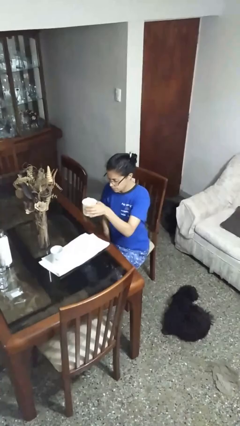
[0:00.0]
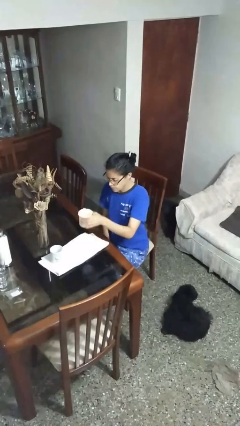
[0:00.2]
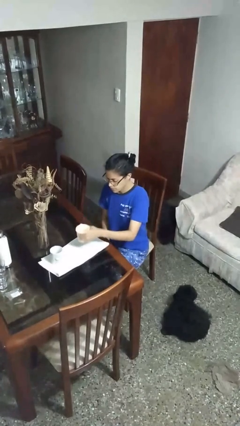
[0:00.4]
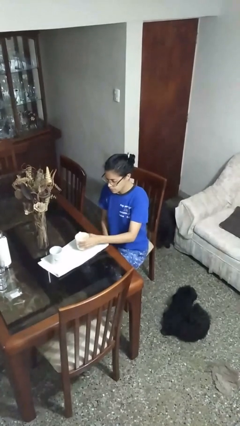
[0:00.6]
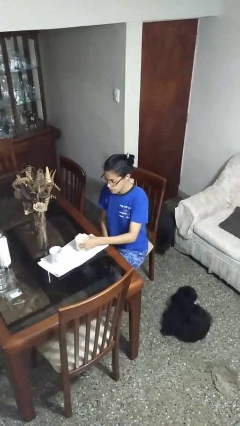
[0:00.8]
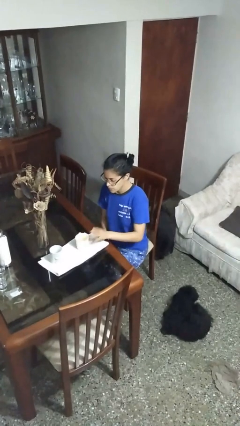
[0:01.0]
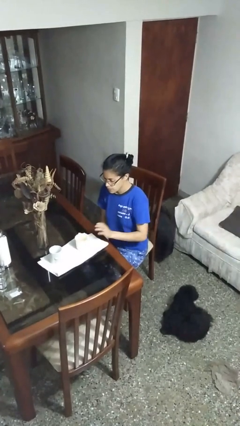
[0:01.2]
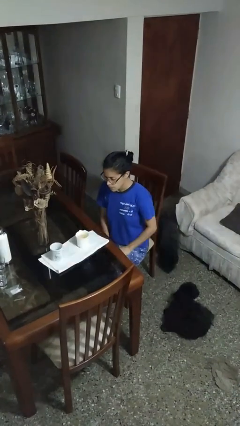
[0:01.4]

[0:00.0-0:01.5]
person puts down object on table

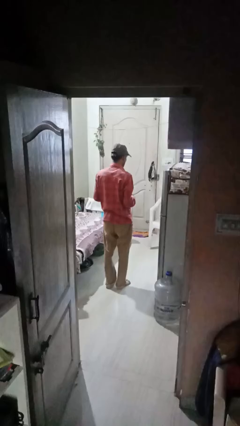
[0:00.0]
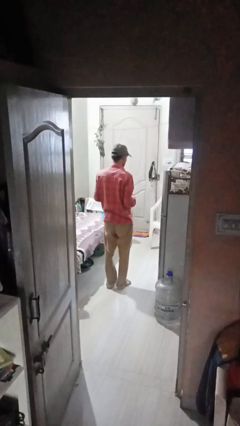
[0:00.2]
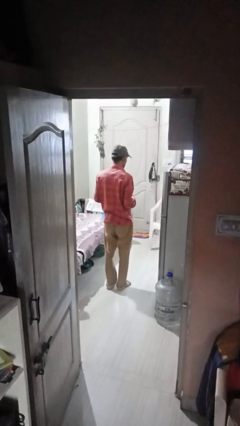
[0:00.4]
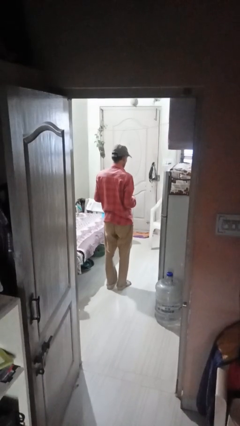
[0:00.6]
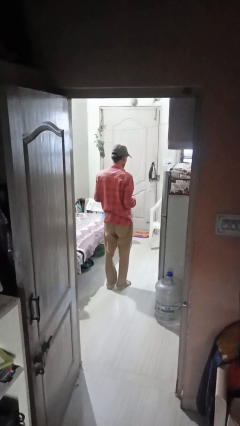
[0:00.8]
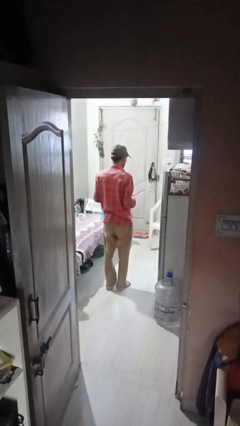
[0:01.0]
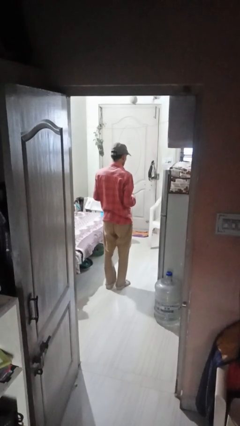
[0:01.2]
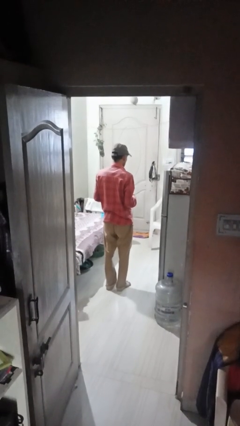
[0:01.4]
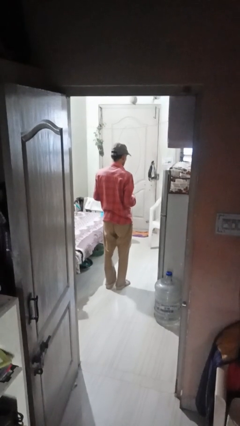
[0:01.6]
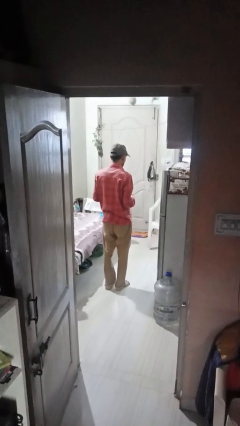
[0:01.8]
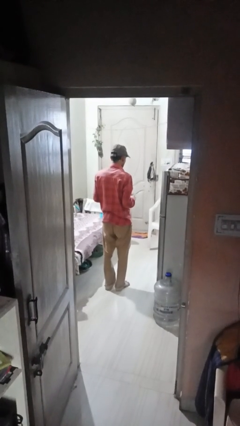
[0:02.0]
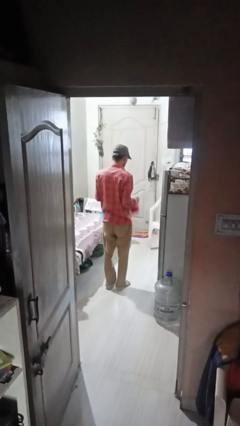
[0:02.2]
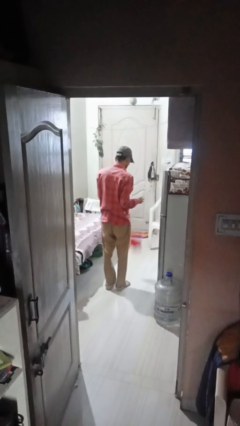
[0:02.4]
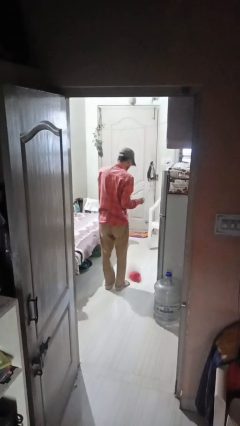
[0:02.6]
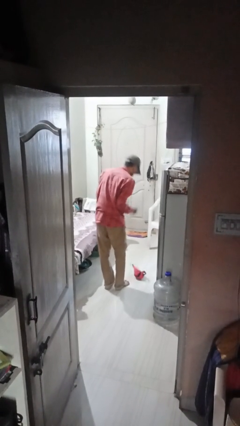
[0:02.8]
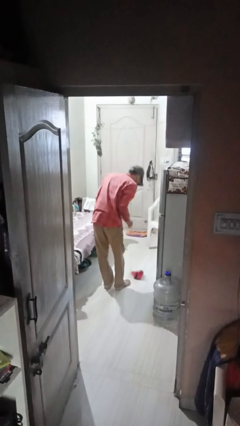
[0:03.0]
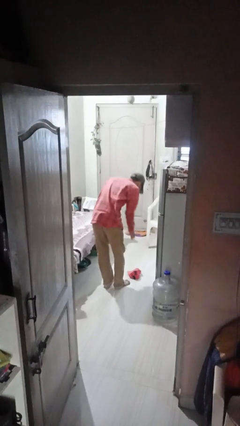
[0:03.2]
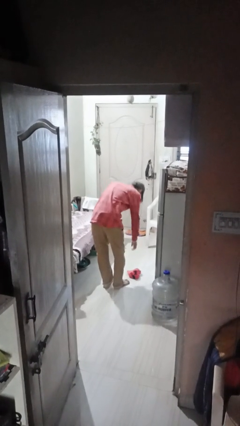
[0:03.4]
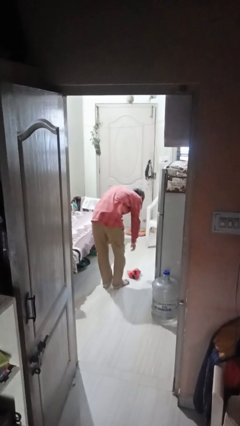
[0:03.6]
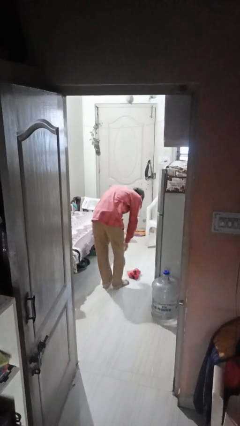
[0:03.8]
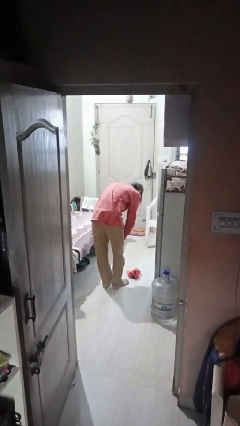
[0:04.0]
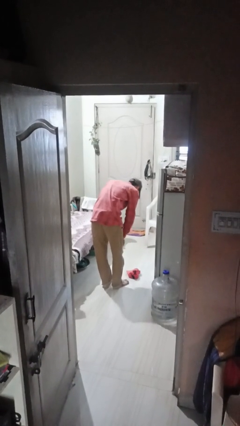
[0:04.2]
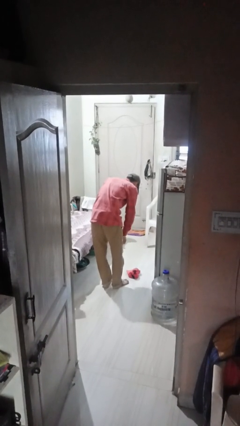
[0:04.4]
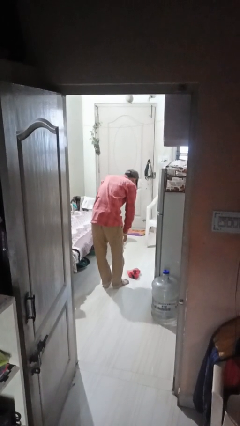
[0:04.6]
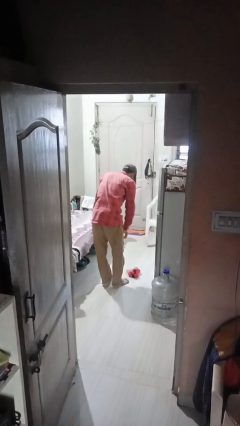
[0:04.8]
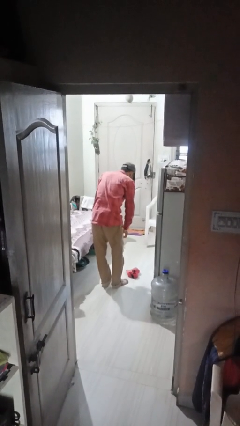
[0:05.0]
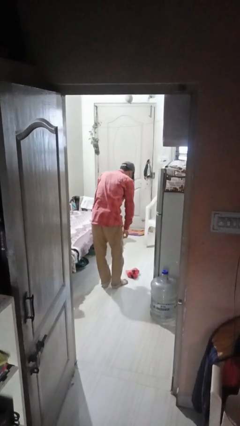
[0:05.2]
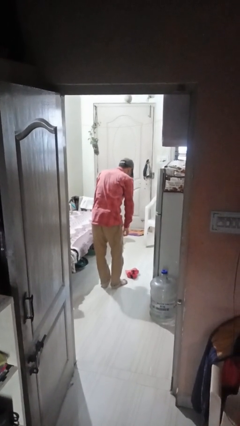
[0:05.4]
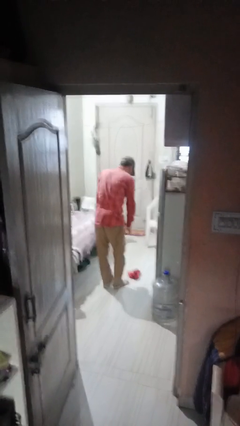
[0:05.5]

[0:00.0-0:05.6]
person drops object

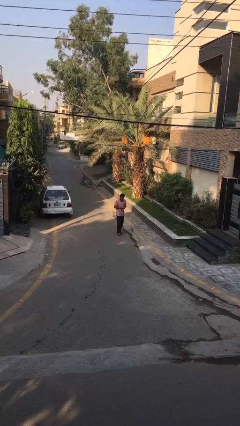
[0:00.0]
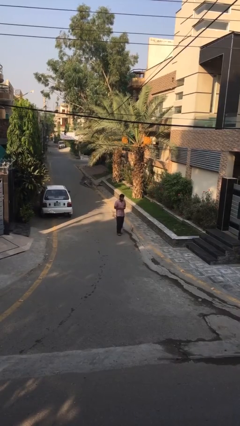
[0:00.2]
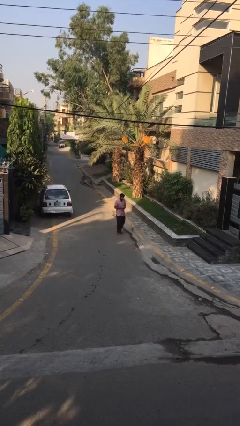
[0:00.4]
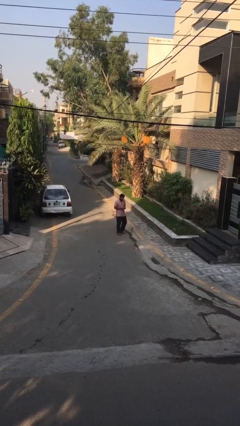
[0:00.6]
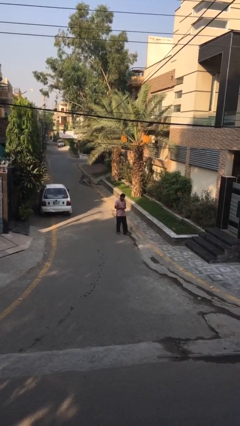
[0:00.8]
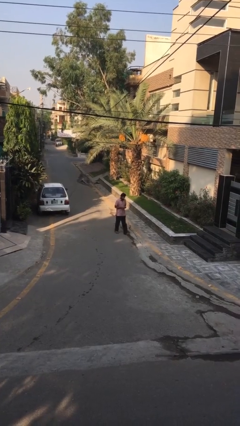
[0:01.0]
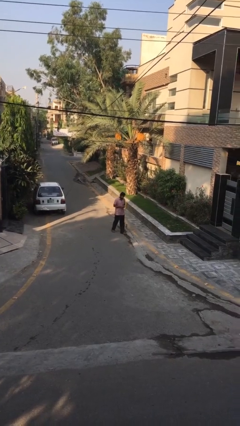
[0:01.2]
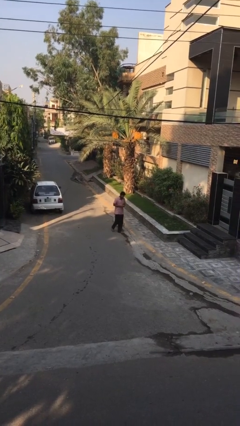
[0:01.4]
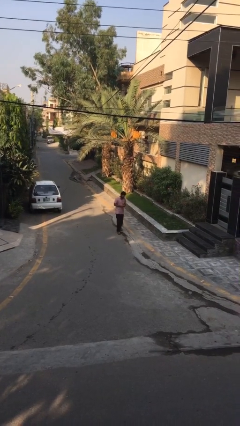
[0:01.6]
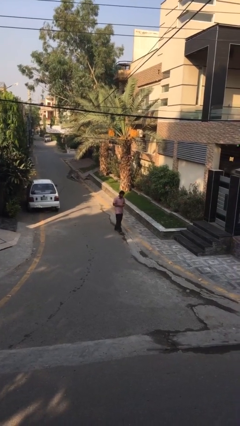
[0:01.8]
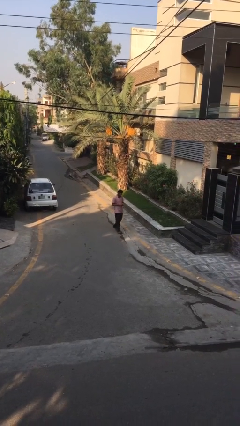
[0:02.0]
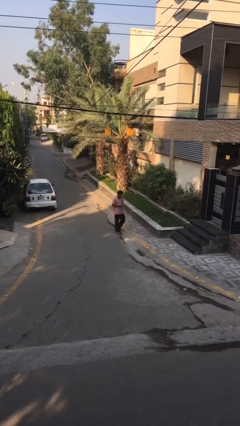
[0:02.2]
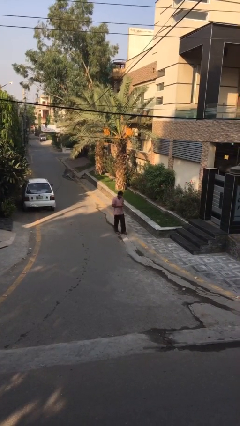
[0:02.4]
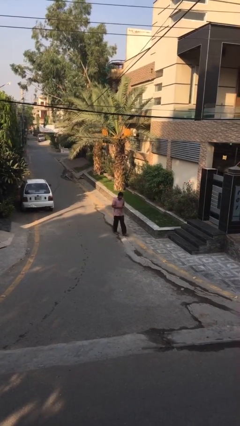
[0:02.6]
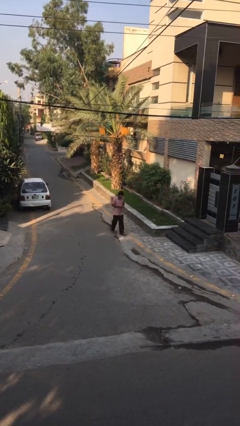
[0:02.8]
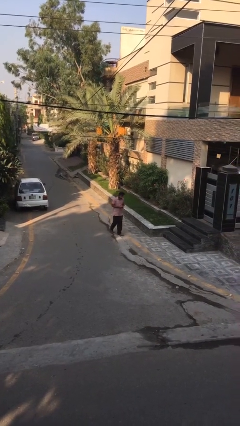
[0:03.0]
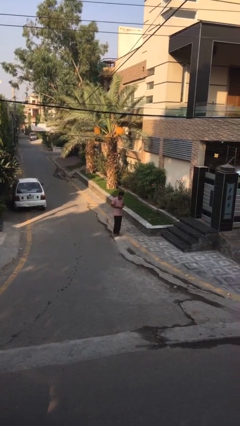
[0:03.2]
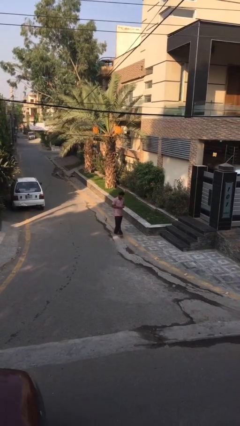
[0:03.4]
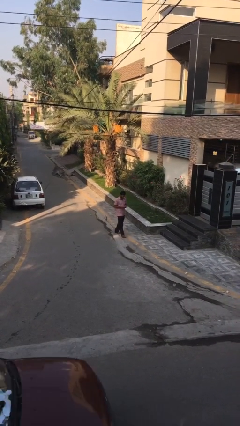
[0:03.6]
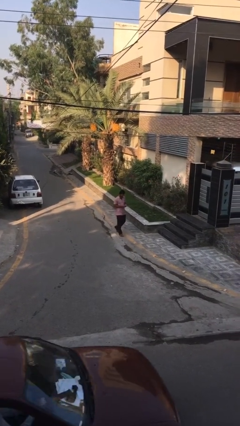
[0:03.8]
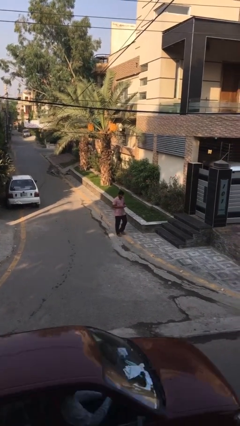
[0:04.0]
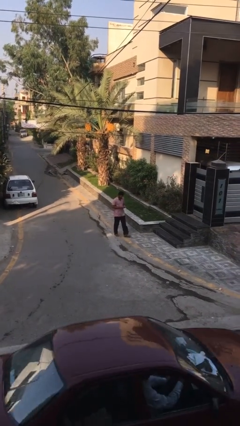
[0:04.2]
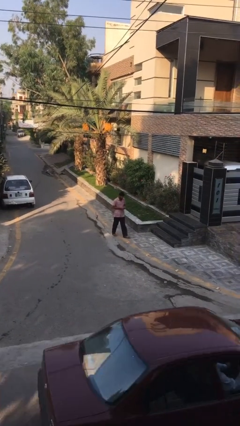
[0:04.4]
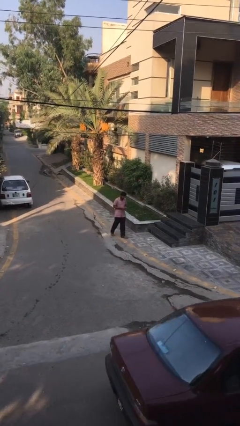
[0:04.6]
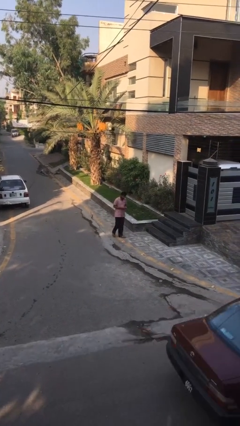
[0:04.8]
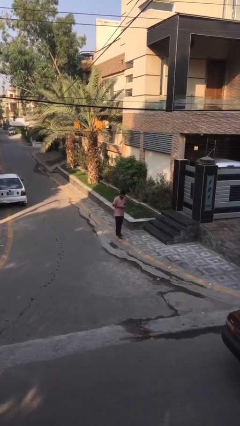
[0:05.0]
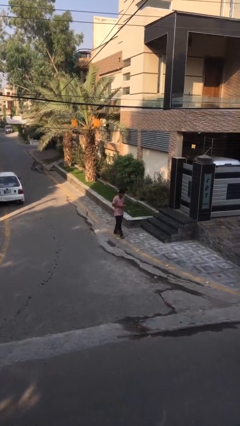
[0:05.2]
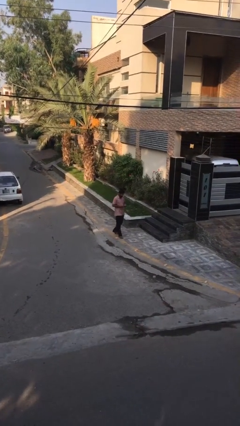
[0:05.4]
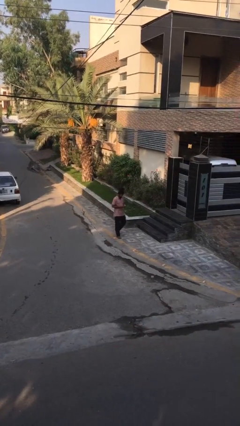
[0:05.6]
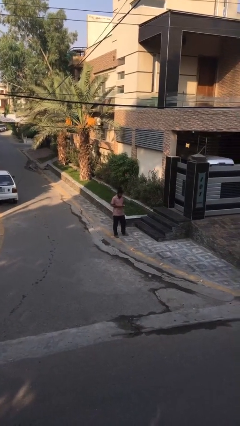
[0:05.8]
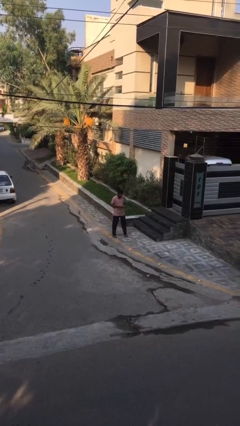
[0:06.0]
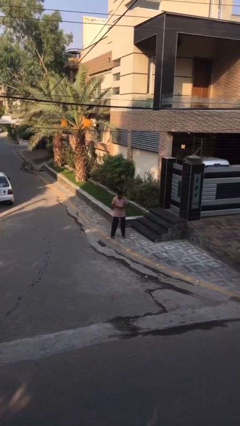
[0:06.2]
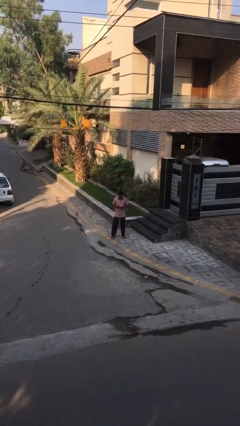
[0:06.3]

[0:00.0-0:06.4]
person texts on phone

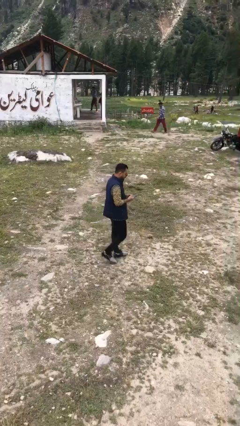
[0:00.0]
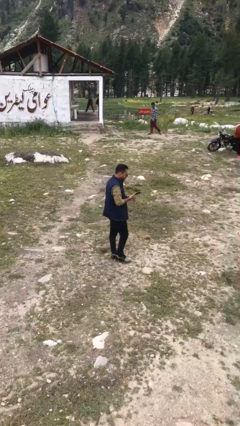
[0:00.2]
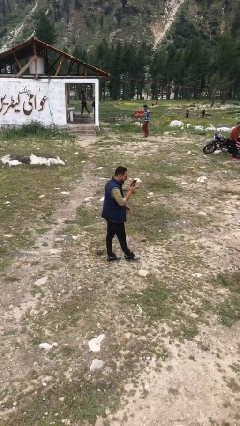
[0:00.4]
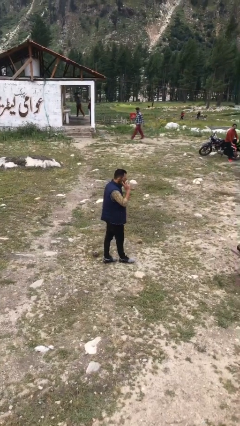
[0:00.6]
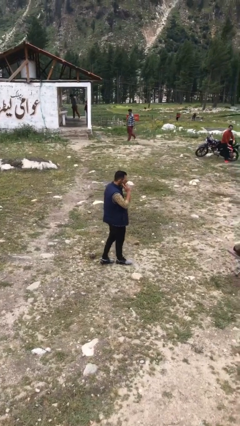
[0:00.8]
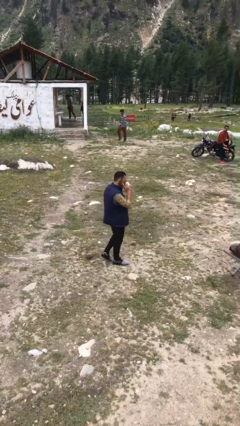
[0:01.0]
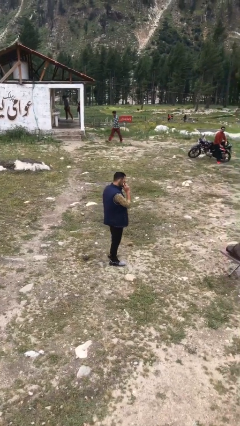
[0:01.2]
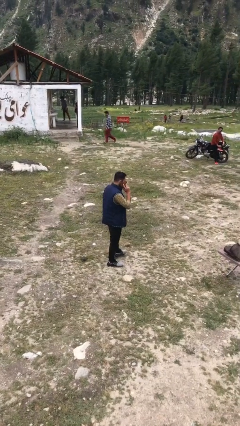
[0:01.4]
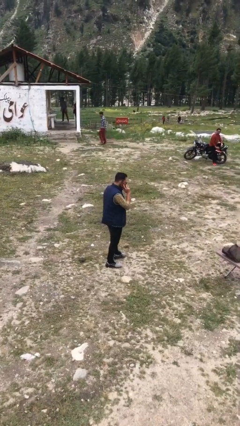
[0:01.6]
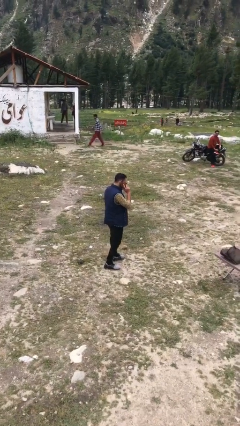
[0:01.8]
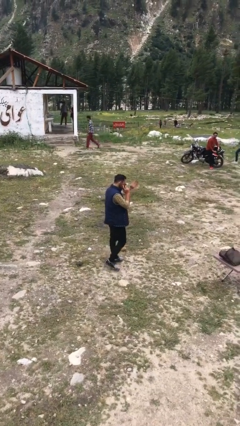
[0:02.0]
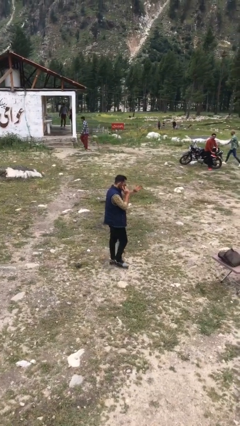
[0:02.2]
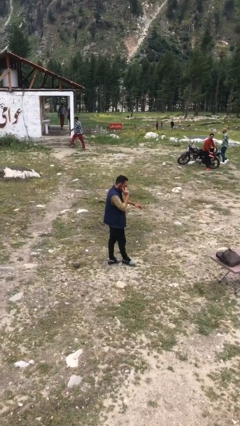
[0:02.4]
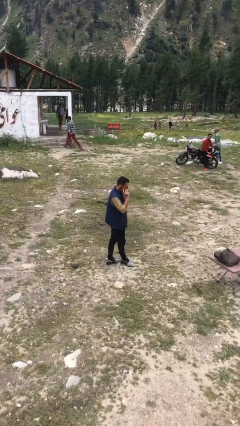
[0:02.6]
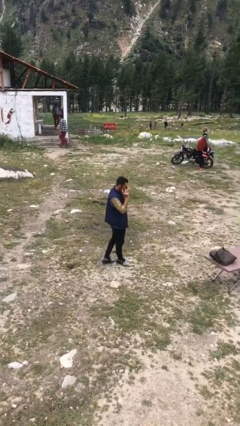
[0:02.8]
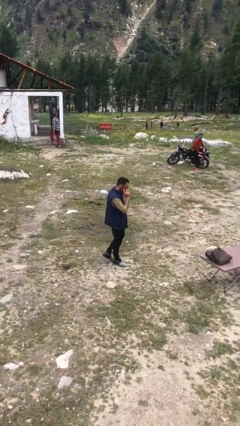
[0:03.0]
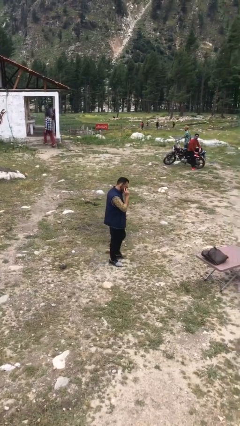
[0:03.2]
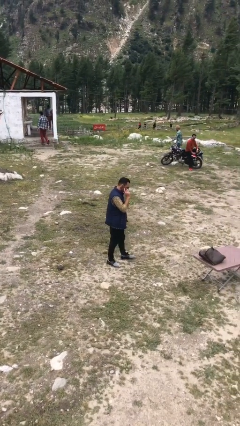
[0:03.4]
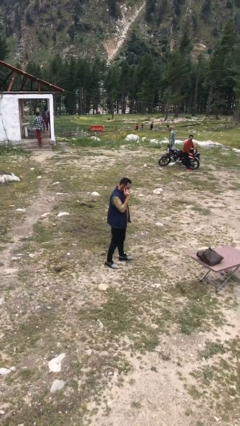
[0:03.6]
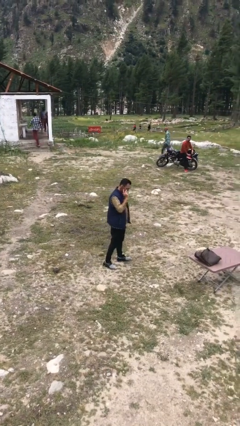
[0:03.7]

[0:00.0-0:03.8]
person talks on phone

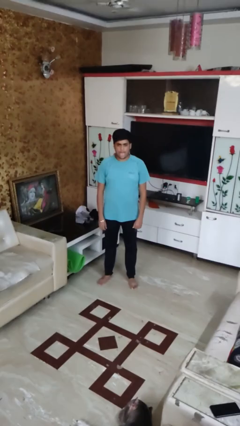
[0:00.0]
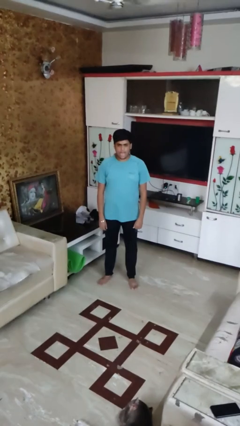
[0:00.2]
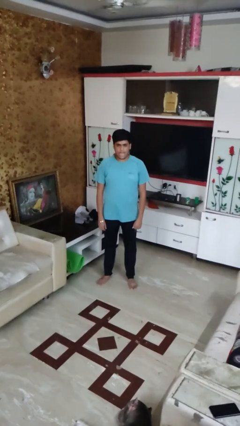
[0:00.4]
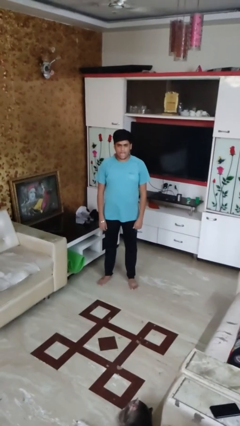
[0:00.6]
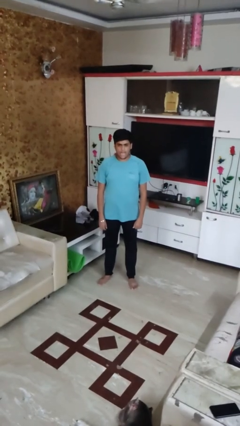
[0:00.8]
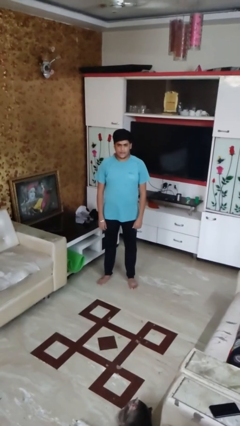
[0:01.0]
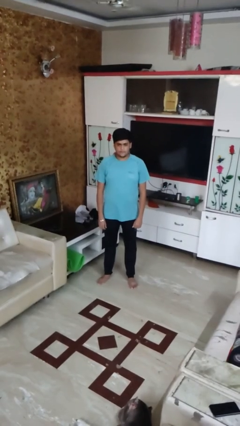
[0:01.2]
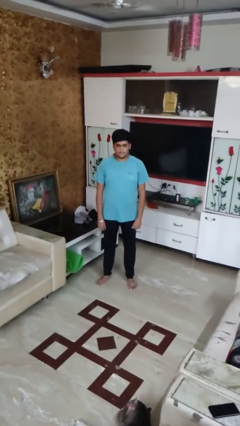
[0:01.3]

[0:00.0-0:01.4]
person sticks out tongue
